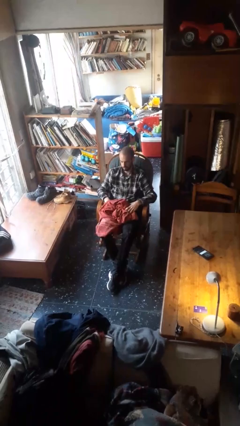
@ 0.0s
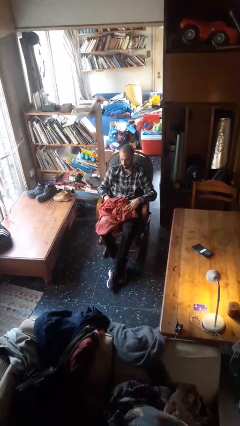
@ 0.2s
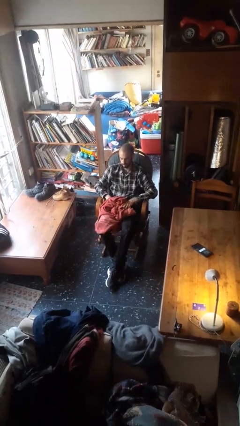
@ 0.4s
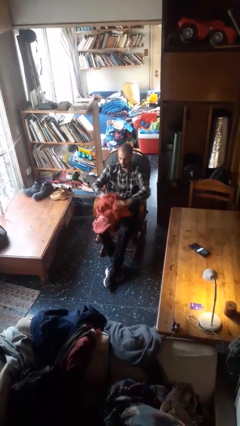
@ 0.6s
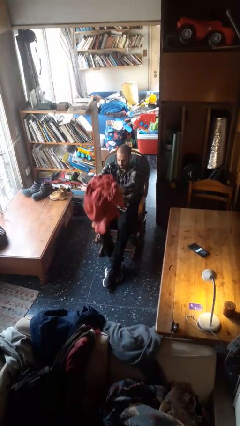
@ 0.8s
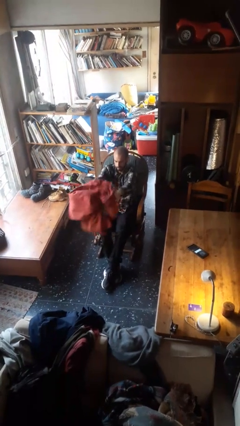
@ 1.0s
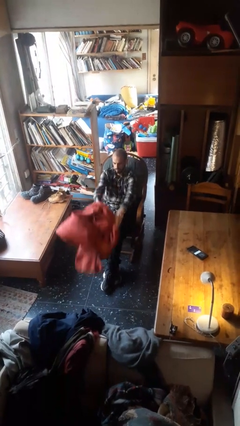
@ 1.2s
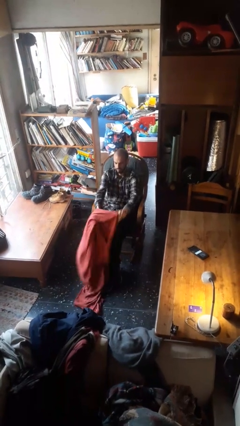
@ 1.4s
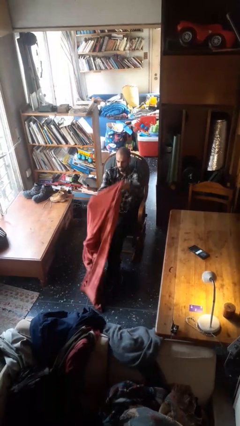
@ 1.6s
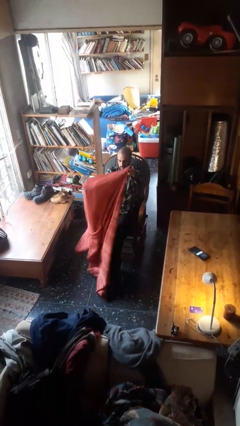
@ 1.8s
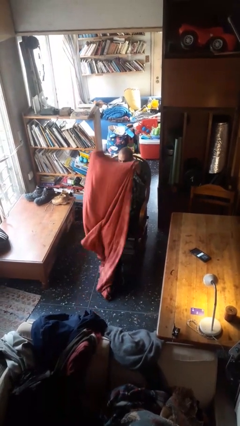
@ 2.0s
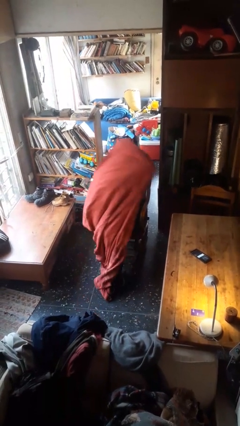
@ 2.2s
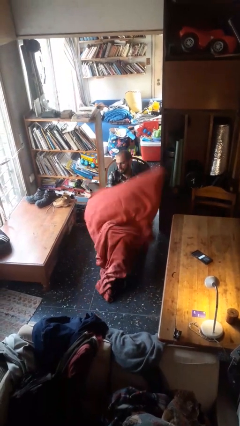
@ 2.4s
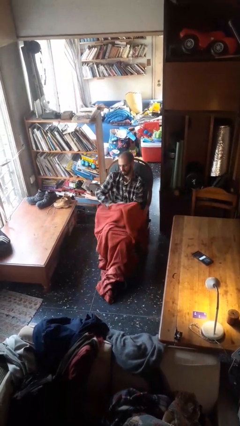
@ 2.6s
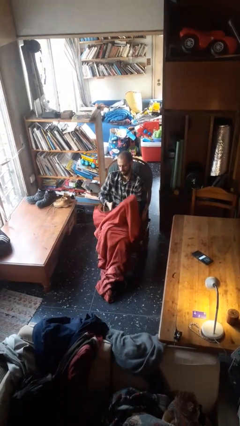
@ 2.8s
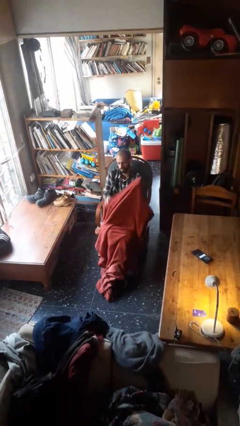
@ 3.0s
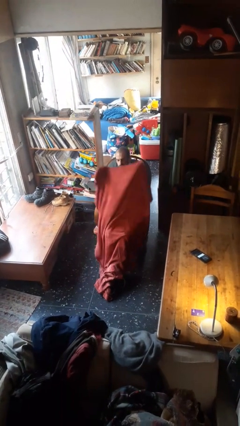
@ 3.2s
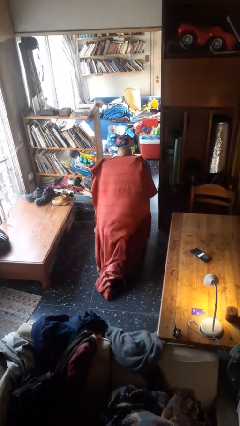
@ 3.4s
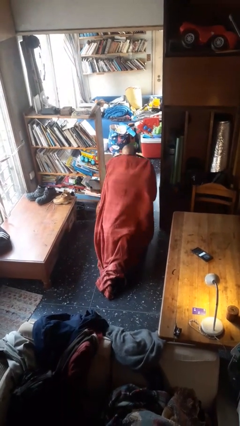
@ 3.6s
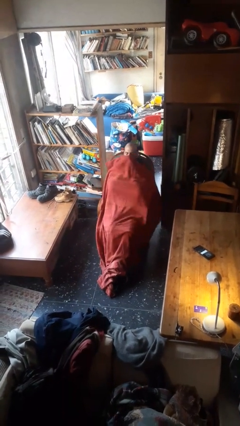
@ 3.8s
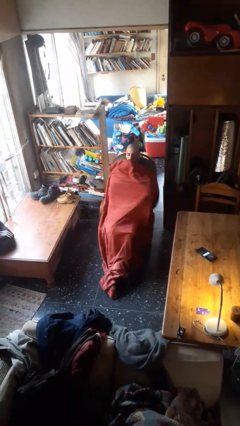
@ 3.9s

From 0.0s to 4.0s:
person covers with blanket

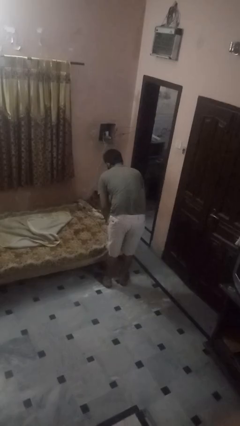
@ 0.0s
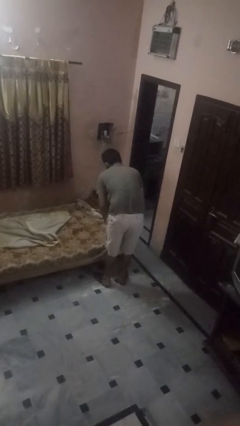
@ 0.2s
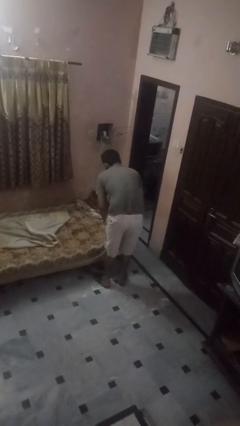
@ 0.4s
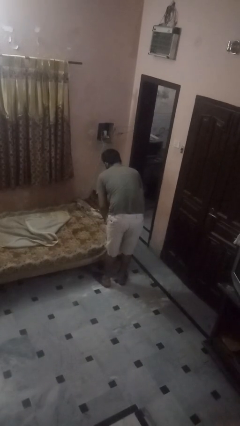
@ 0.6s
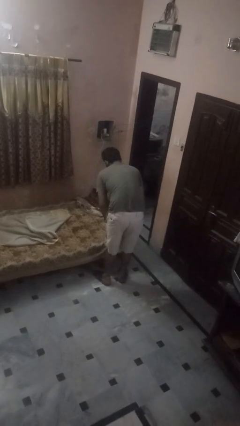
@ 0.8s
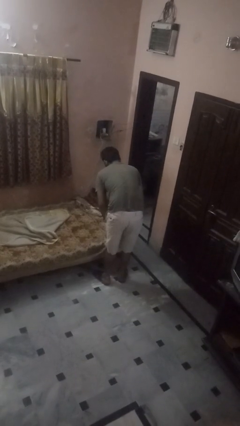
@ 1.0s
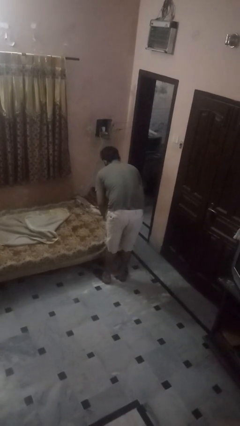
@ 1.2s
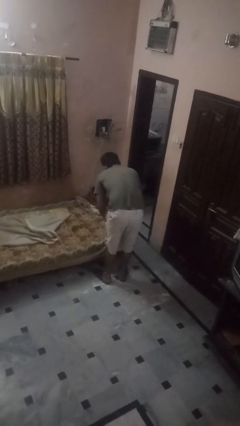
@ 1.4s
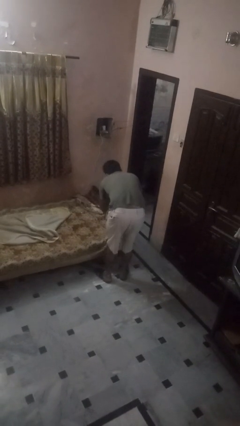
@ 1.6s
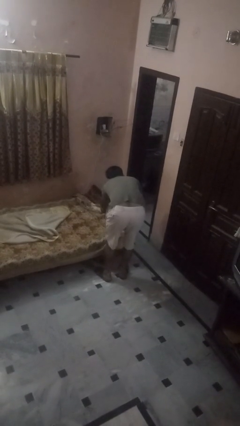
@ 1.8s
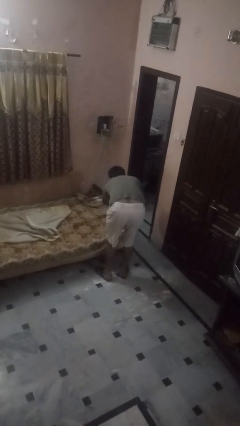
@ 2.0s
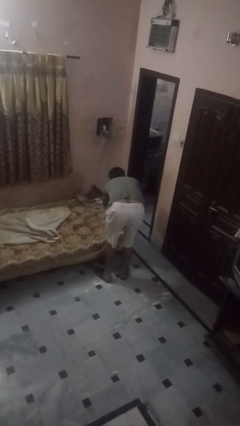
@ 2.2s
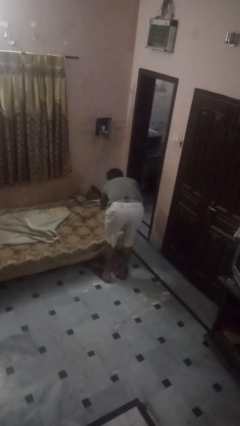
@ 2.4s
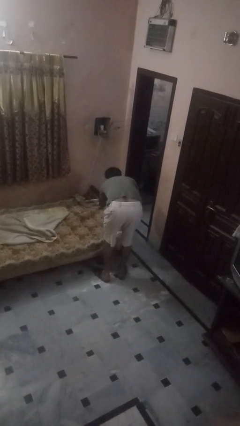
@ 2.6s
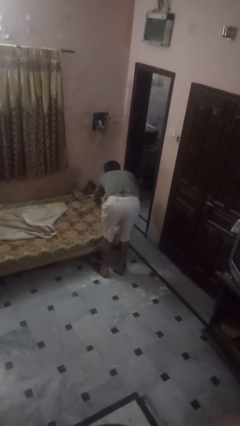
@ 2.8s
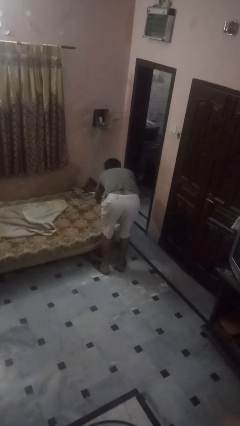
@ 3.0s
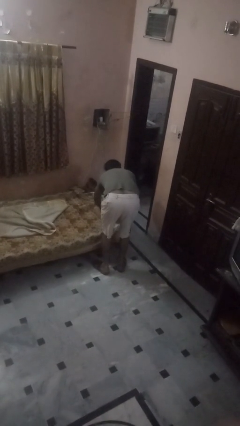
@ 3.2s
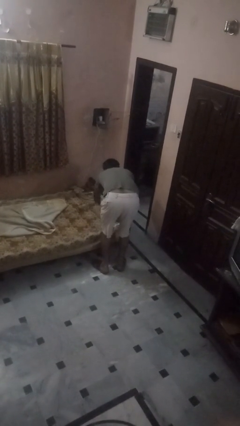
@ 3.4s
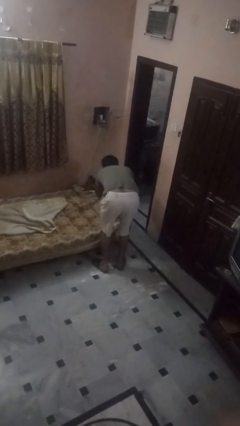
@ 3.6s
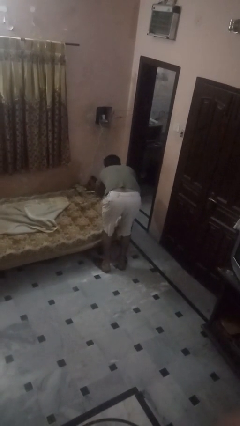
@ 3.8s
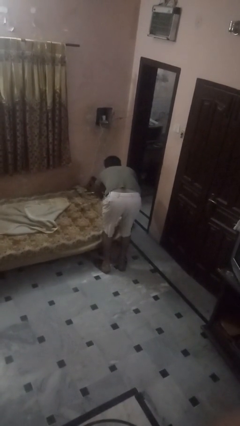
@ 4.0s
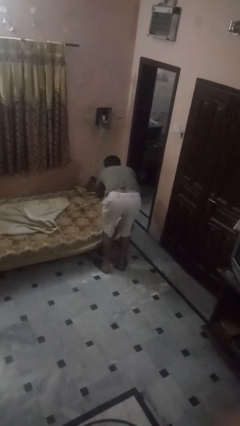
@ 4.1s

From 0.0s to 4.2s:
person makes bed

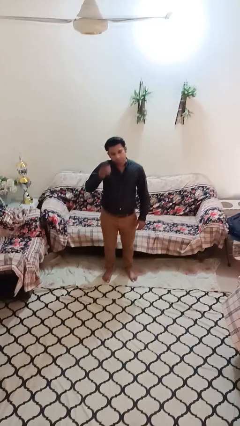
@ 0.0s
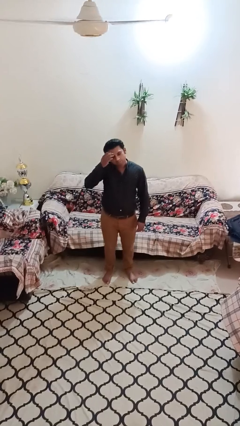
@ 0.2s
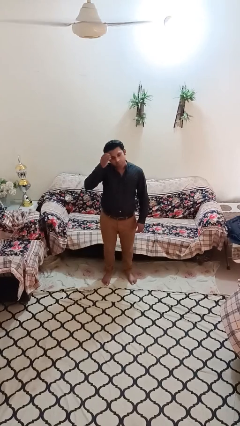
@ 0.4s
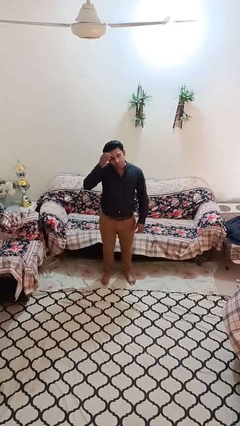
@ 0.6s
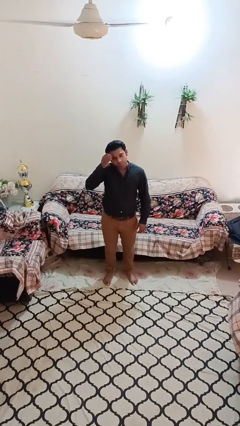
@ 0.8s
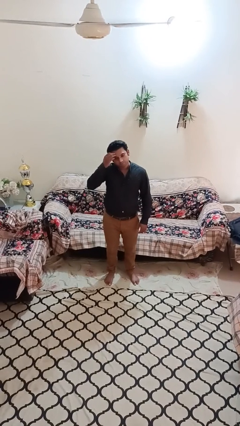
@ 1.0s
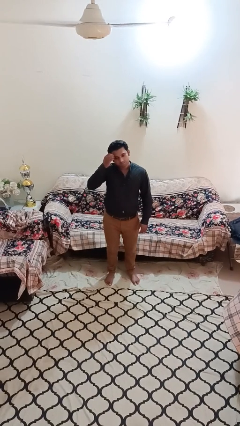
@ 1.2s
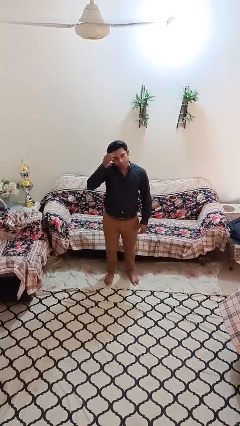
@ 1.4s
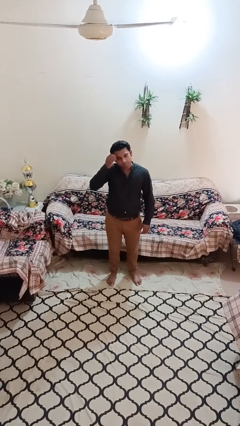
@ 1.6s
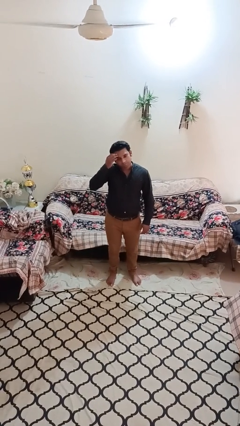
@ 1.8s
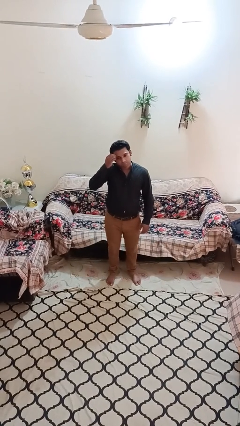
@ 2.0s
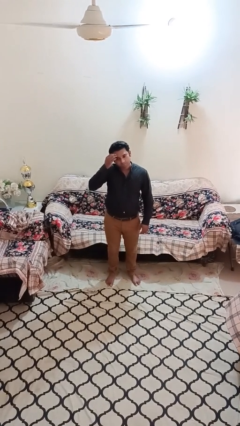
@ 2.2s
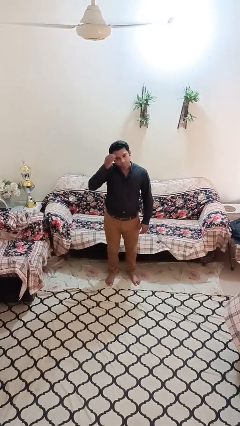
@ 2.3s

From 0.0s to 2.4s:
person scratches face

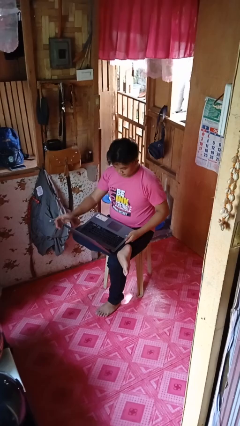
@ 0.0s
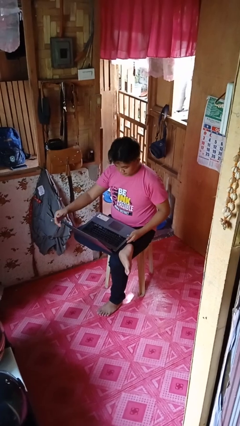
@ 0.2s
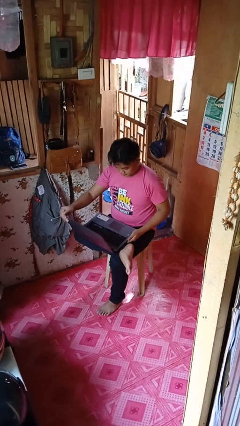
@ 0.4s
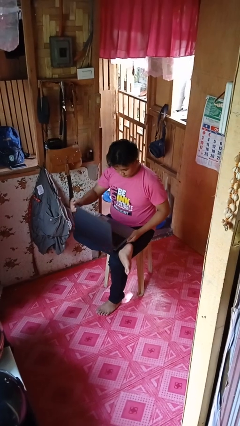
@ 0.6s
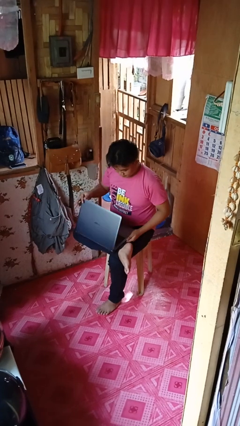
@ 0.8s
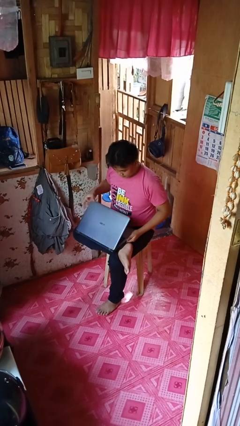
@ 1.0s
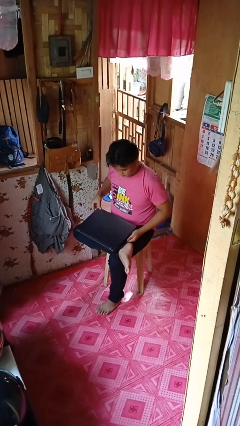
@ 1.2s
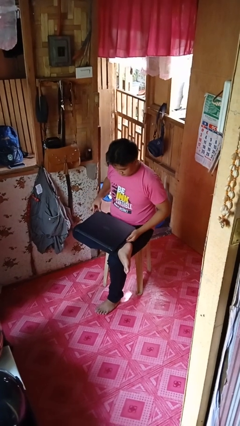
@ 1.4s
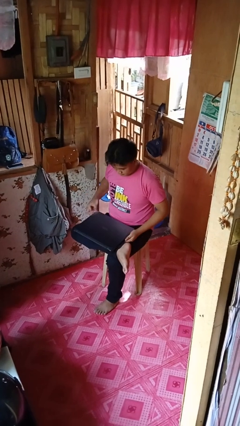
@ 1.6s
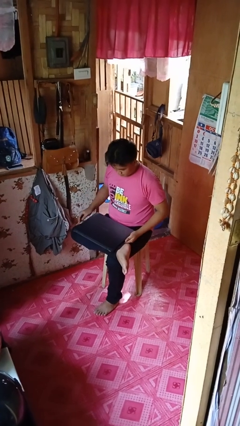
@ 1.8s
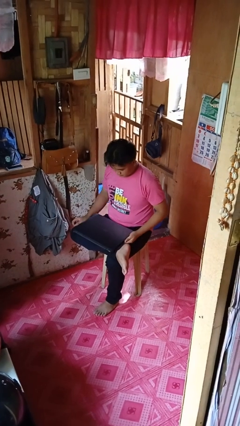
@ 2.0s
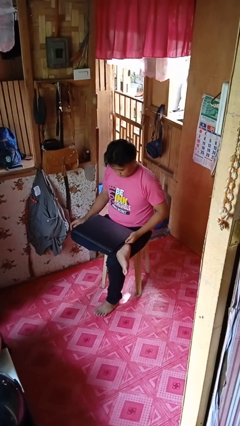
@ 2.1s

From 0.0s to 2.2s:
person closes laptop

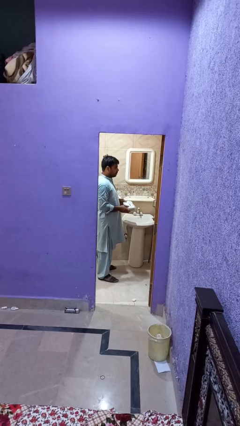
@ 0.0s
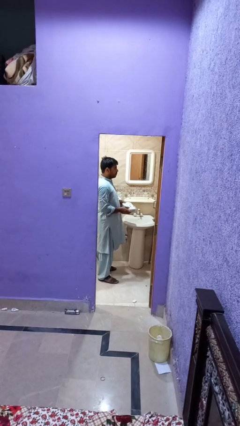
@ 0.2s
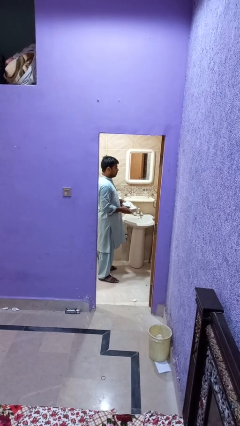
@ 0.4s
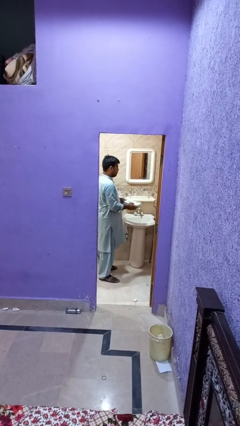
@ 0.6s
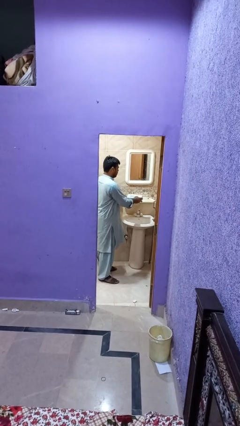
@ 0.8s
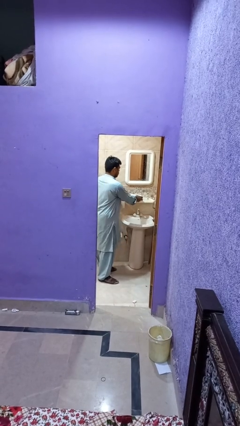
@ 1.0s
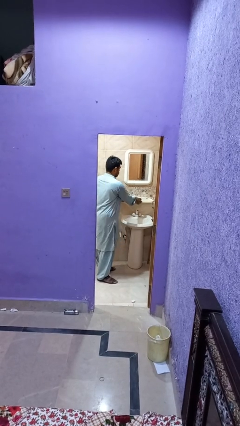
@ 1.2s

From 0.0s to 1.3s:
person puts down object on countertop

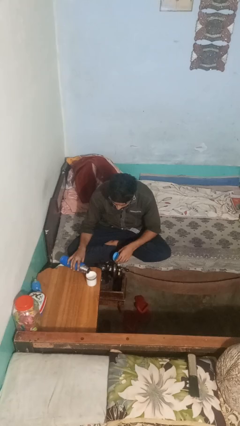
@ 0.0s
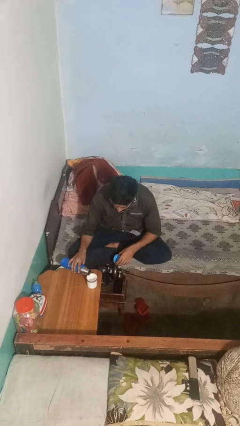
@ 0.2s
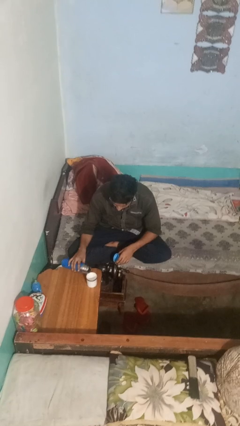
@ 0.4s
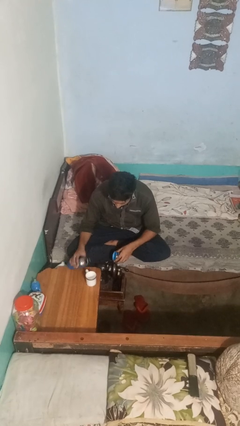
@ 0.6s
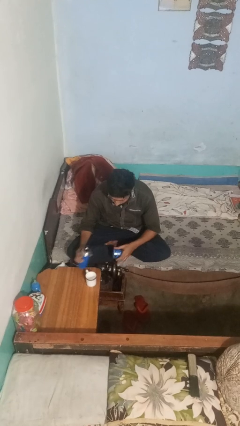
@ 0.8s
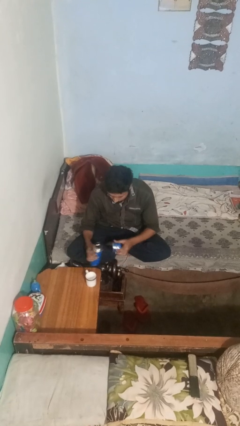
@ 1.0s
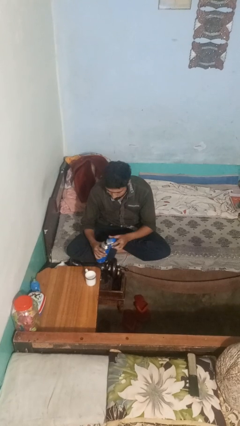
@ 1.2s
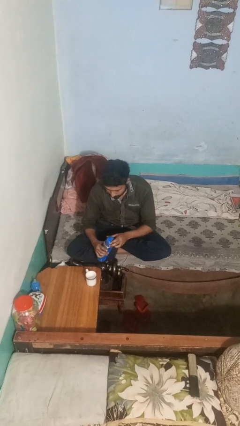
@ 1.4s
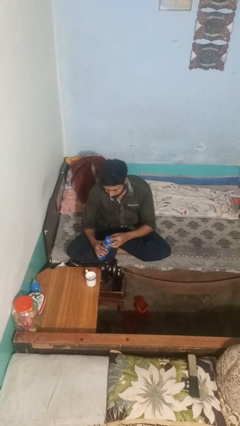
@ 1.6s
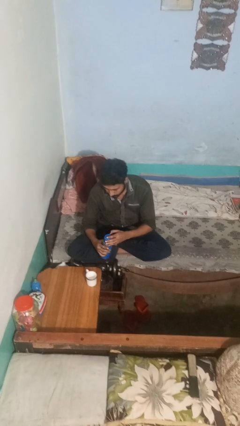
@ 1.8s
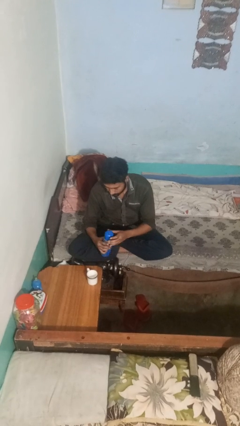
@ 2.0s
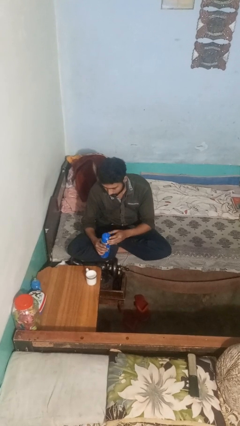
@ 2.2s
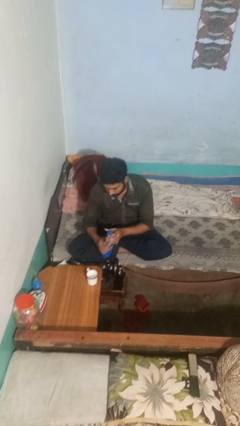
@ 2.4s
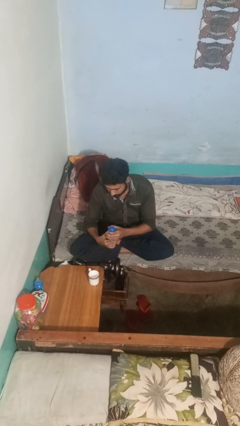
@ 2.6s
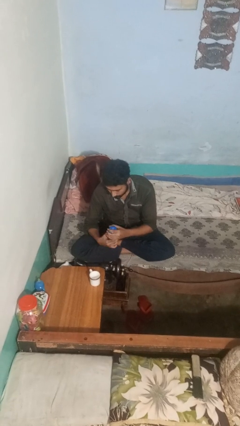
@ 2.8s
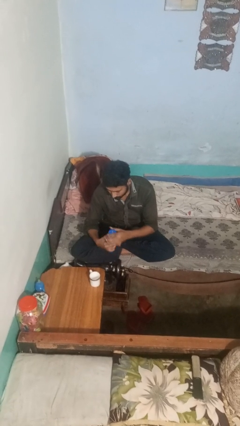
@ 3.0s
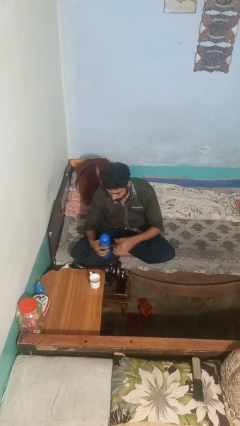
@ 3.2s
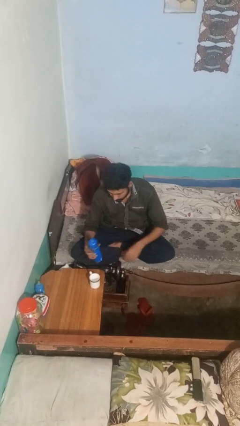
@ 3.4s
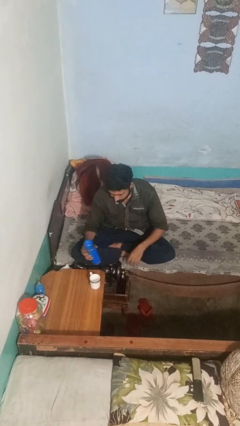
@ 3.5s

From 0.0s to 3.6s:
person screws lid to bottle
